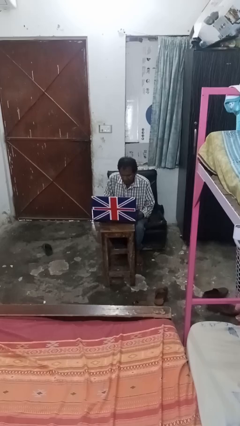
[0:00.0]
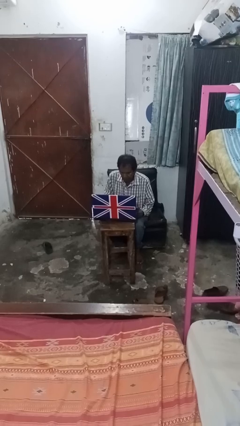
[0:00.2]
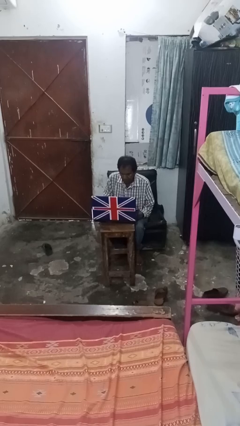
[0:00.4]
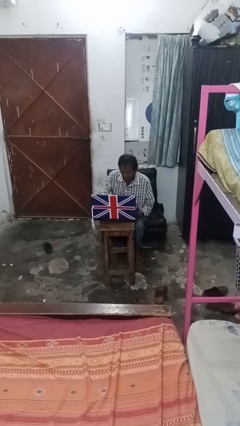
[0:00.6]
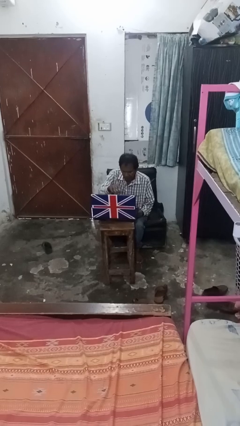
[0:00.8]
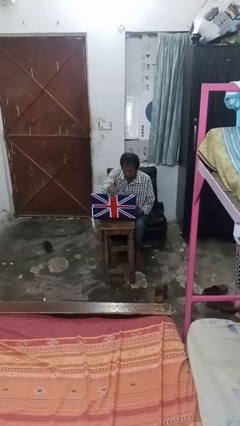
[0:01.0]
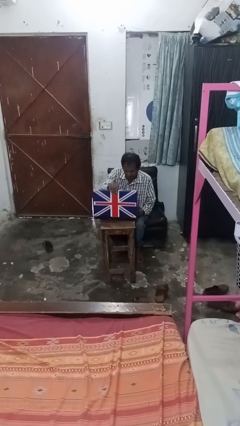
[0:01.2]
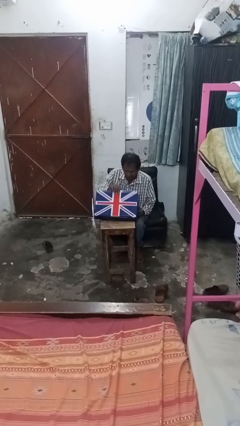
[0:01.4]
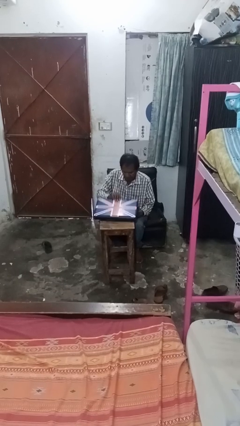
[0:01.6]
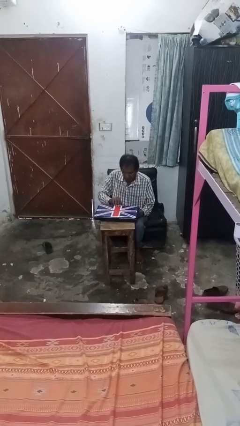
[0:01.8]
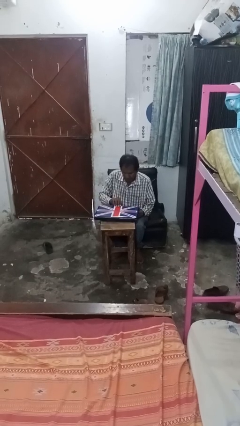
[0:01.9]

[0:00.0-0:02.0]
person closes laptop

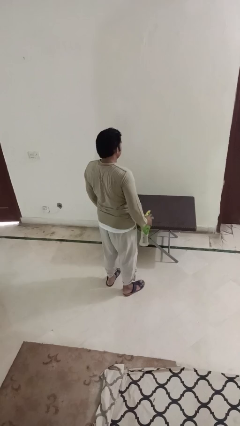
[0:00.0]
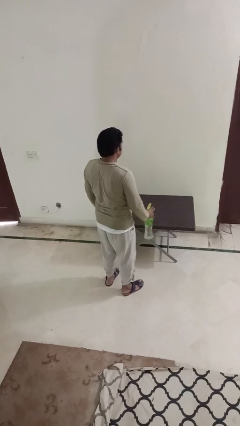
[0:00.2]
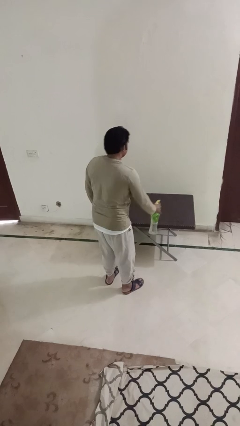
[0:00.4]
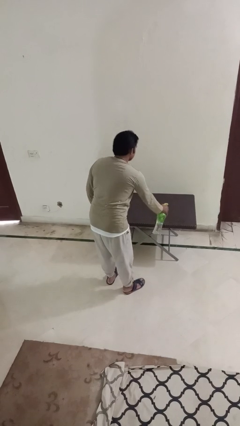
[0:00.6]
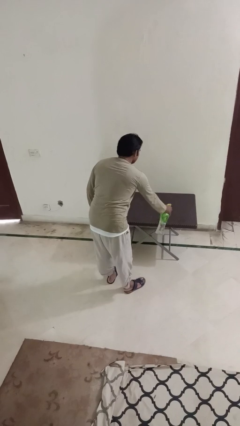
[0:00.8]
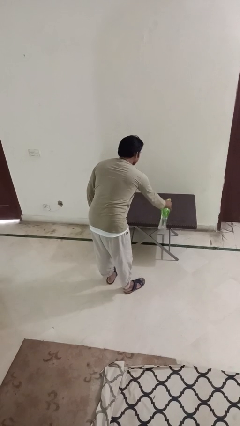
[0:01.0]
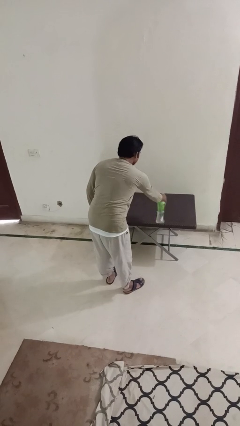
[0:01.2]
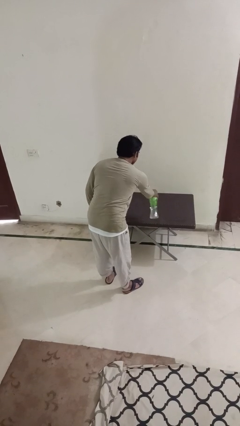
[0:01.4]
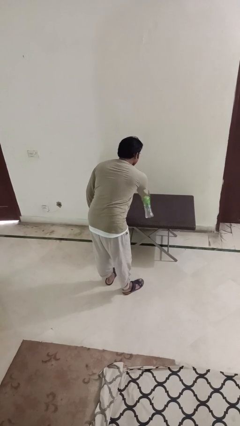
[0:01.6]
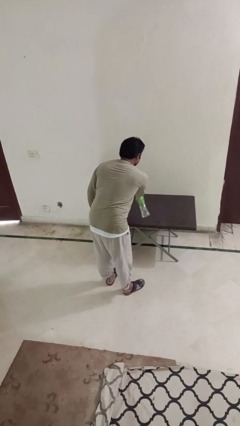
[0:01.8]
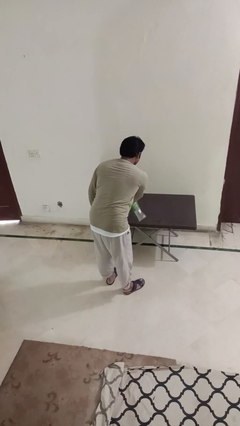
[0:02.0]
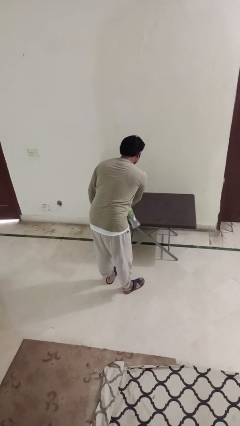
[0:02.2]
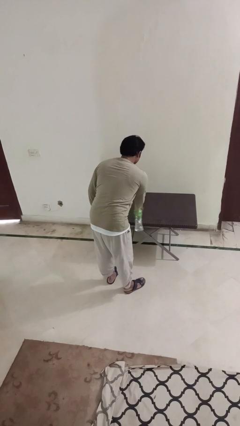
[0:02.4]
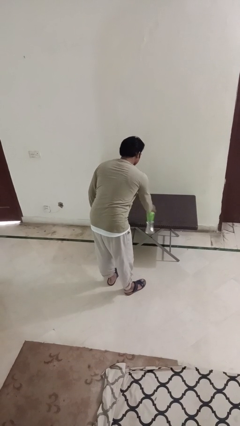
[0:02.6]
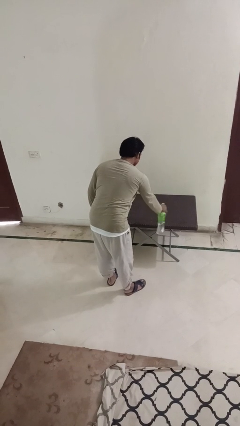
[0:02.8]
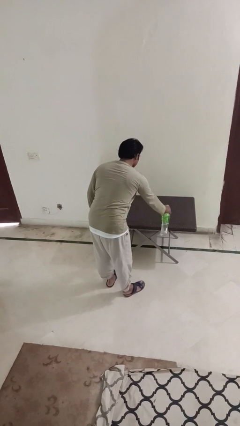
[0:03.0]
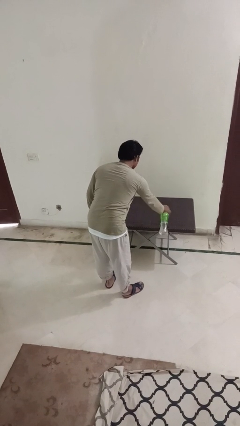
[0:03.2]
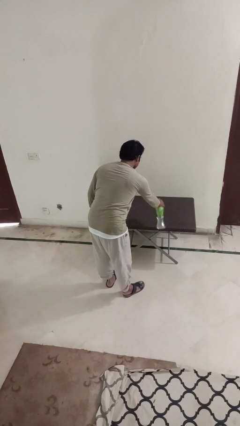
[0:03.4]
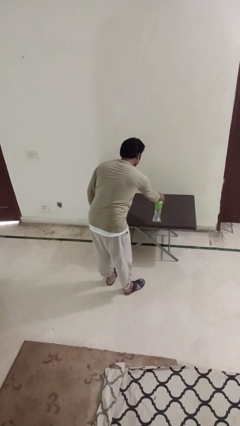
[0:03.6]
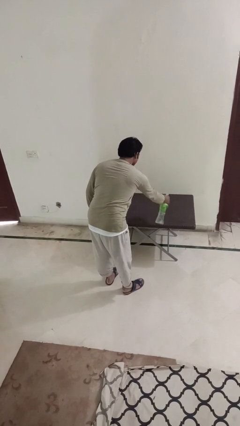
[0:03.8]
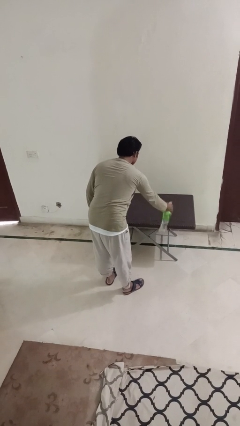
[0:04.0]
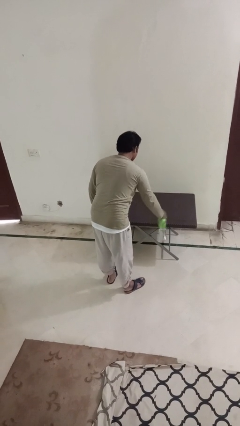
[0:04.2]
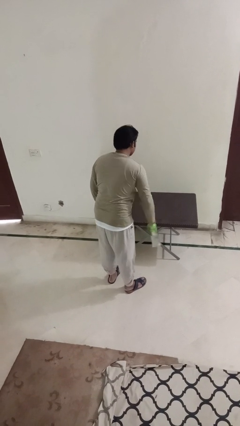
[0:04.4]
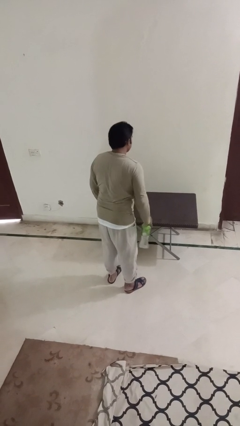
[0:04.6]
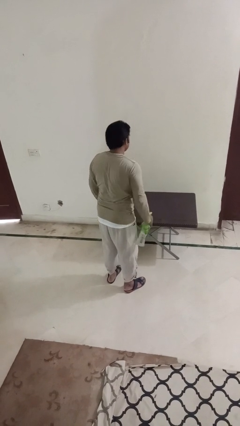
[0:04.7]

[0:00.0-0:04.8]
person sprays from bottle

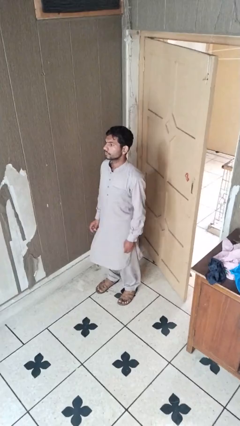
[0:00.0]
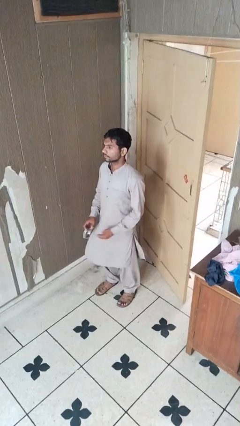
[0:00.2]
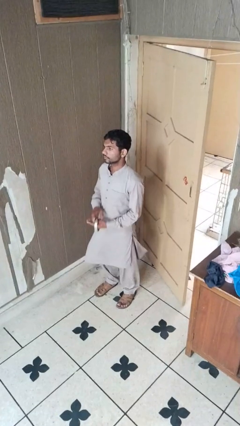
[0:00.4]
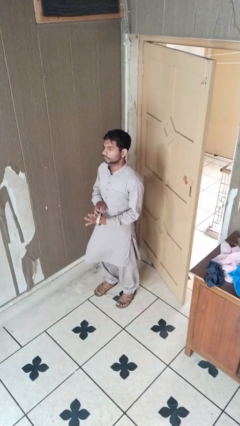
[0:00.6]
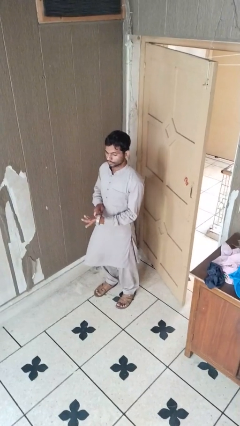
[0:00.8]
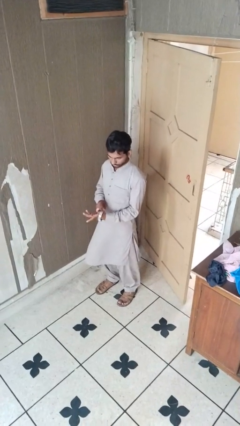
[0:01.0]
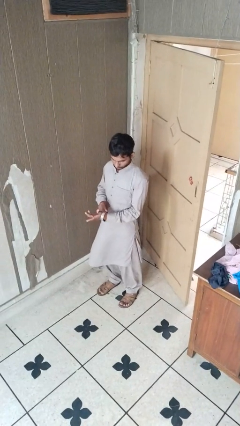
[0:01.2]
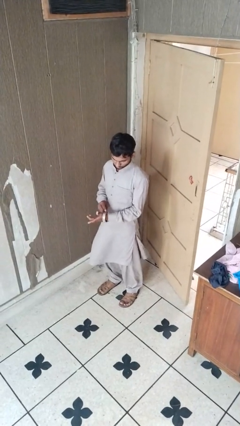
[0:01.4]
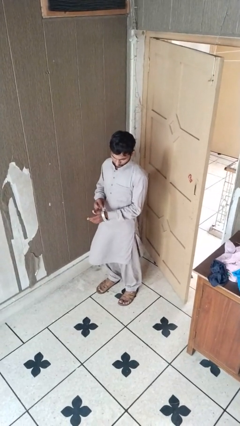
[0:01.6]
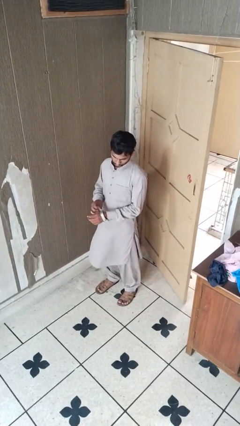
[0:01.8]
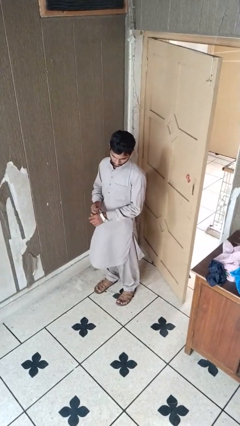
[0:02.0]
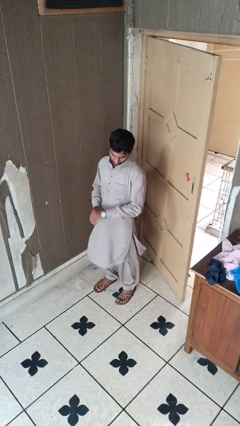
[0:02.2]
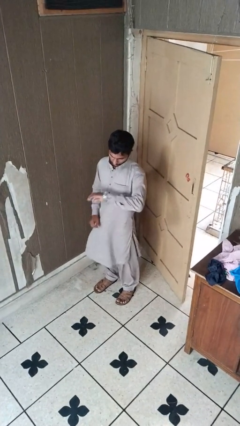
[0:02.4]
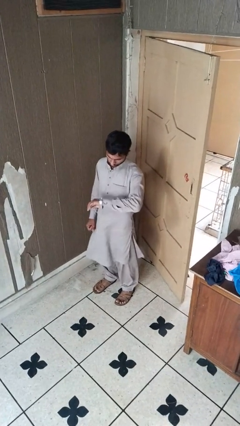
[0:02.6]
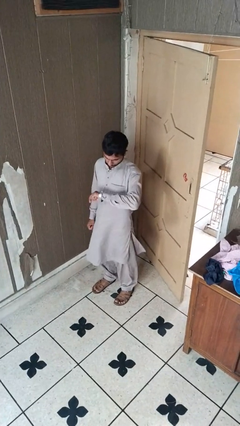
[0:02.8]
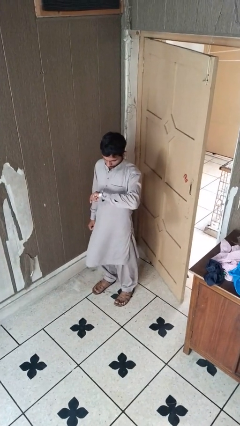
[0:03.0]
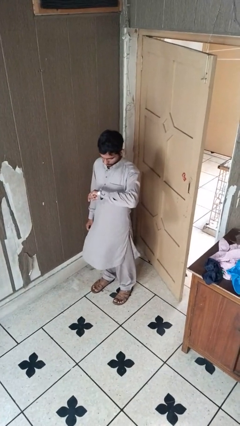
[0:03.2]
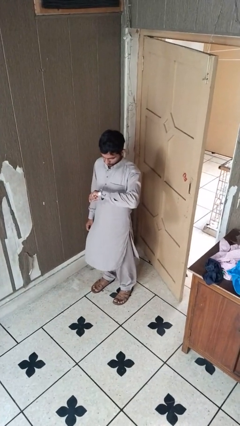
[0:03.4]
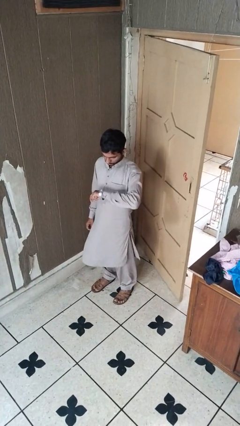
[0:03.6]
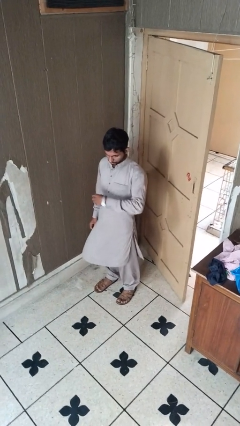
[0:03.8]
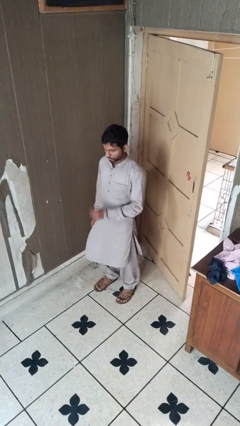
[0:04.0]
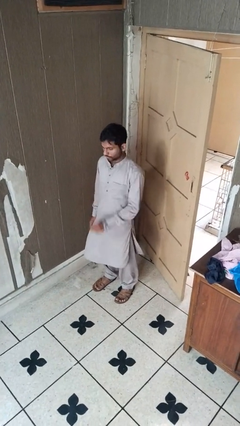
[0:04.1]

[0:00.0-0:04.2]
person puts on wristwatch

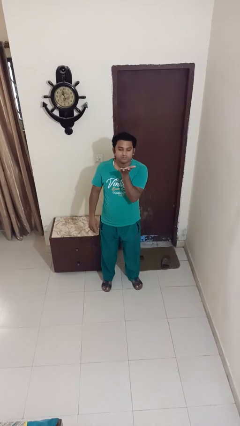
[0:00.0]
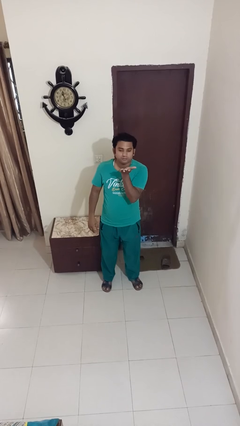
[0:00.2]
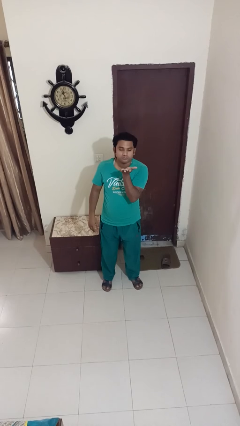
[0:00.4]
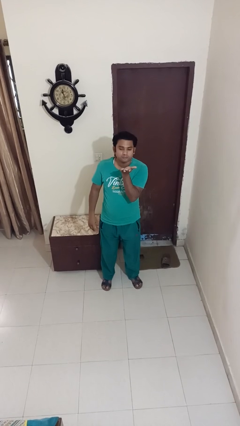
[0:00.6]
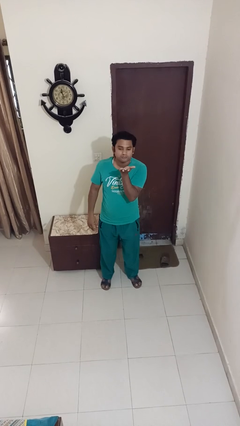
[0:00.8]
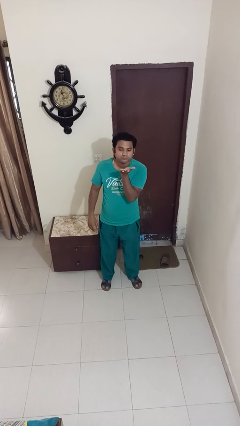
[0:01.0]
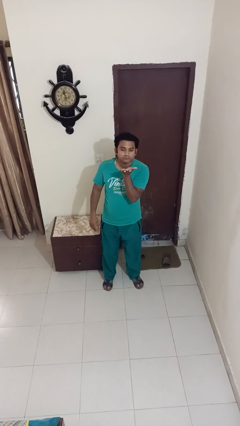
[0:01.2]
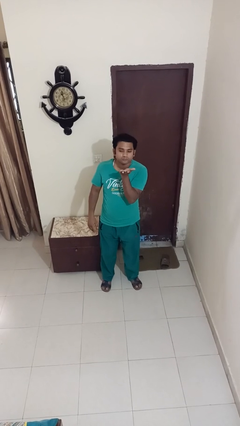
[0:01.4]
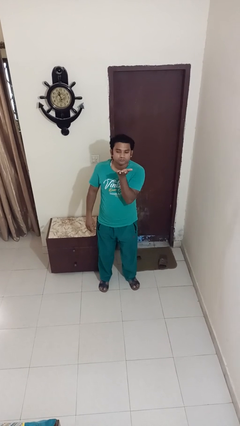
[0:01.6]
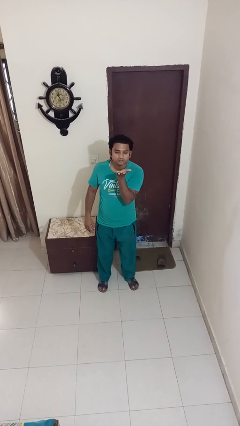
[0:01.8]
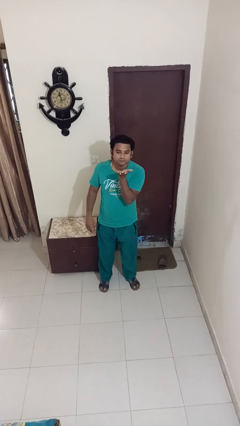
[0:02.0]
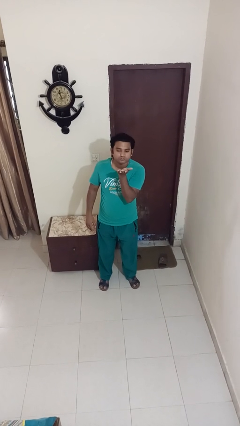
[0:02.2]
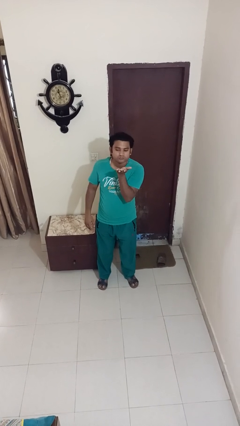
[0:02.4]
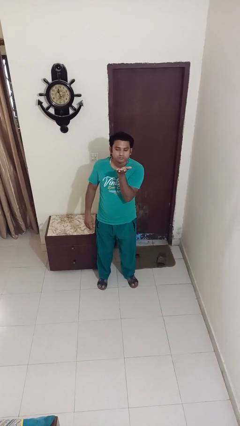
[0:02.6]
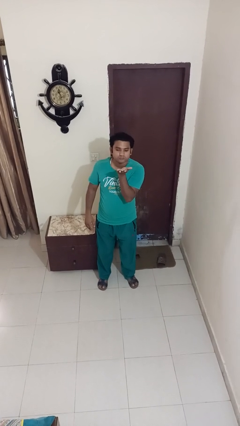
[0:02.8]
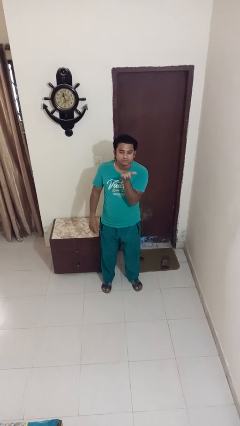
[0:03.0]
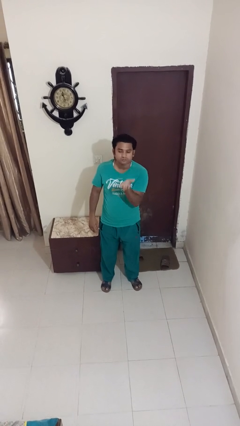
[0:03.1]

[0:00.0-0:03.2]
person gestures blow kiss

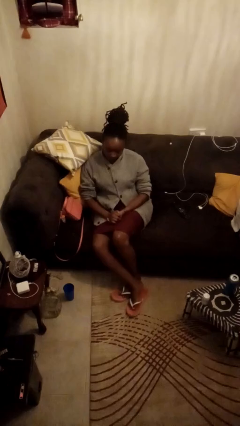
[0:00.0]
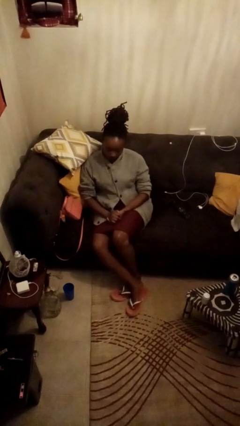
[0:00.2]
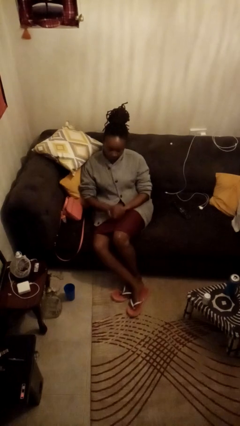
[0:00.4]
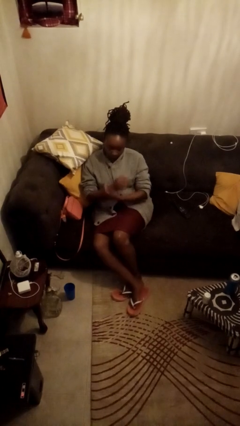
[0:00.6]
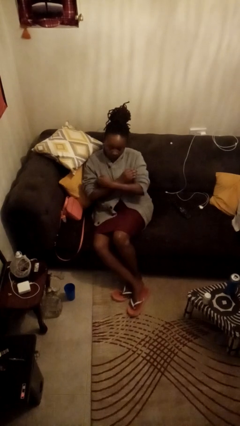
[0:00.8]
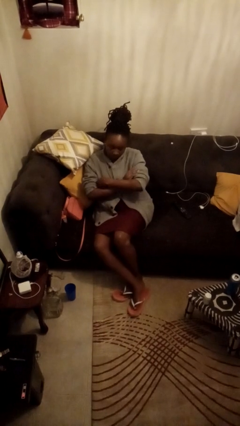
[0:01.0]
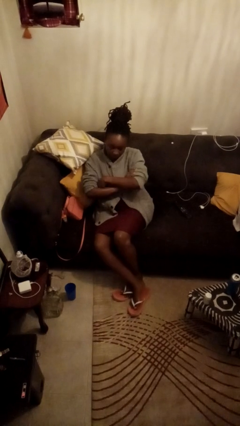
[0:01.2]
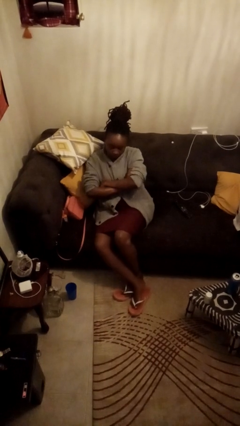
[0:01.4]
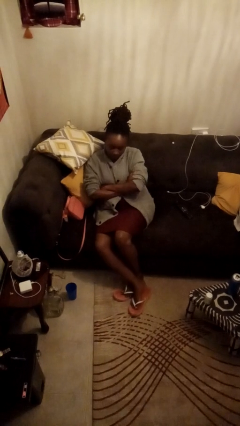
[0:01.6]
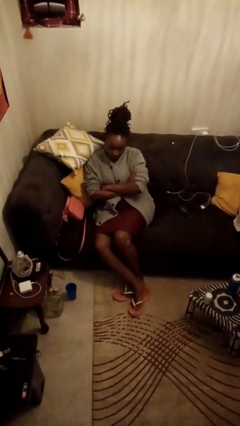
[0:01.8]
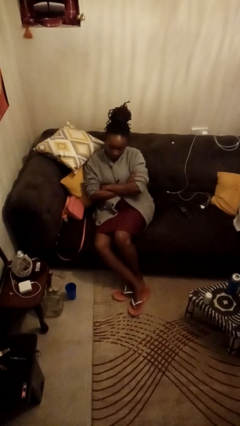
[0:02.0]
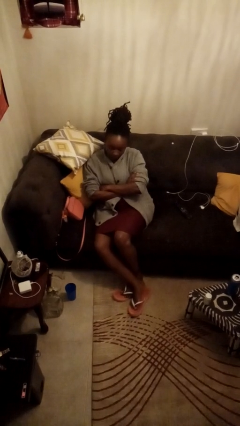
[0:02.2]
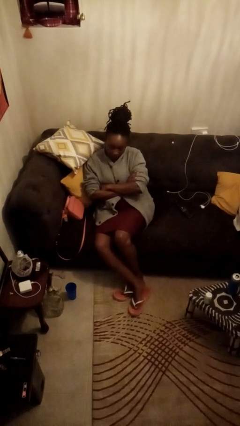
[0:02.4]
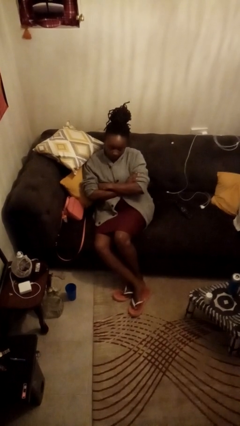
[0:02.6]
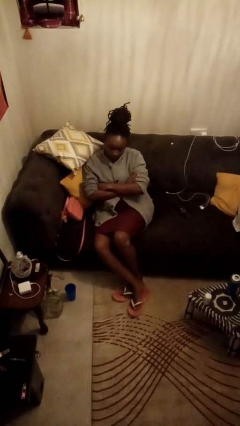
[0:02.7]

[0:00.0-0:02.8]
person crosses arms

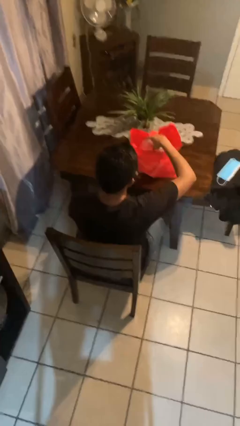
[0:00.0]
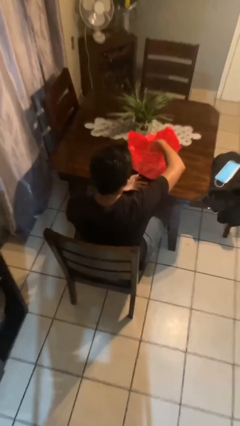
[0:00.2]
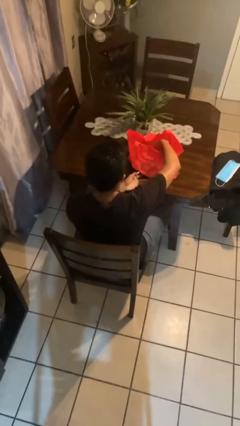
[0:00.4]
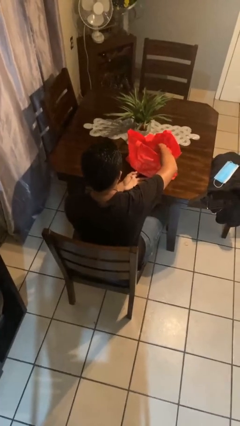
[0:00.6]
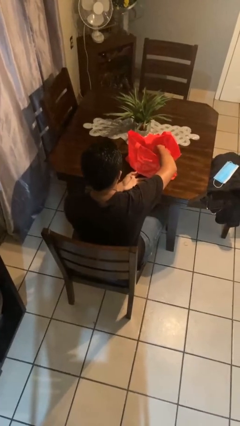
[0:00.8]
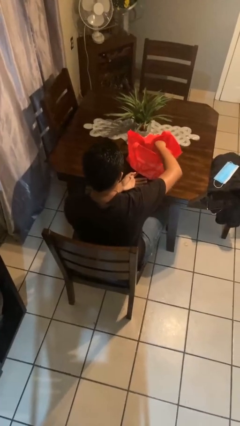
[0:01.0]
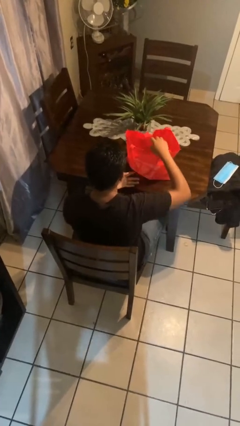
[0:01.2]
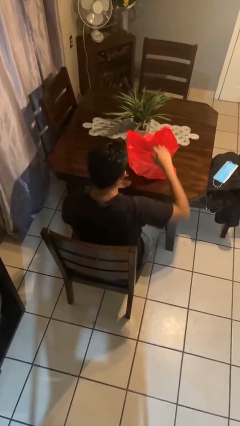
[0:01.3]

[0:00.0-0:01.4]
person puts object into bag
